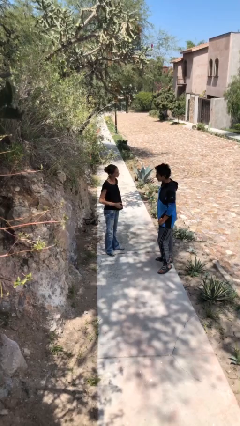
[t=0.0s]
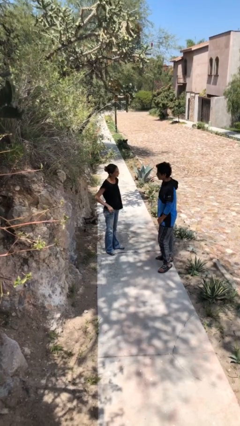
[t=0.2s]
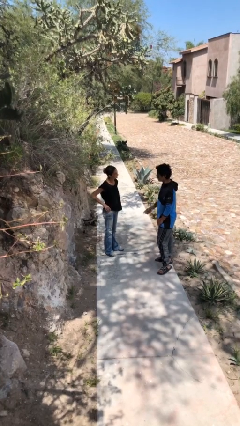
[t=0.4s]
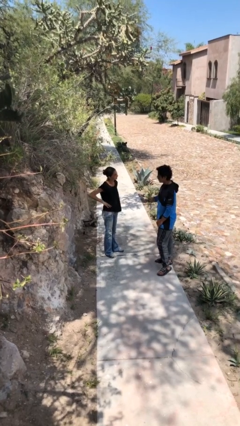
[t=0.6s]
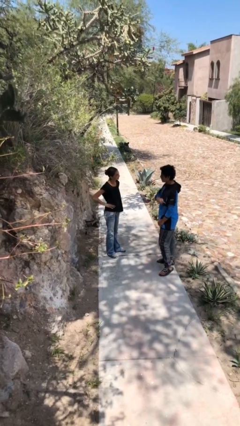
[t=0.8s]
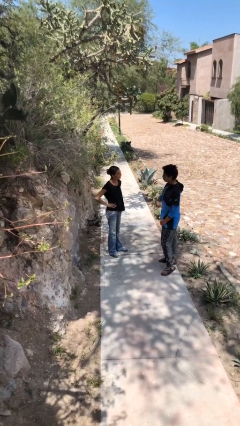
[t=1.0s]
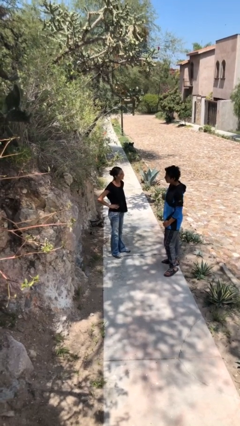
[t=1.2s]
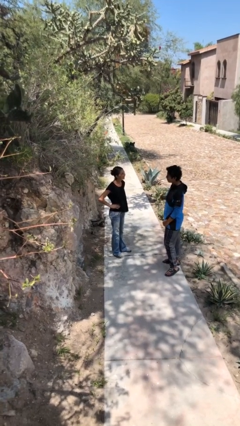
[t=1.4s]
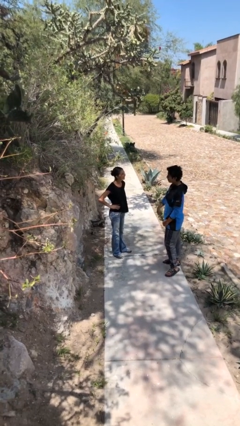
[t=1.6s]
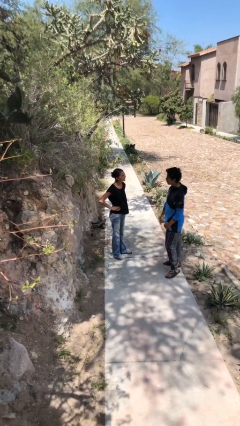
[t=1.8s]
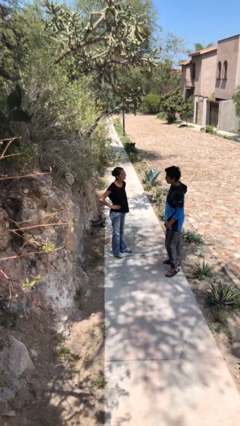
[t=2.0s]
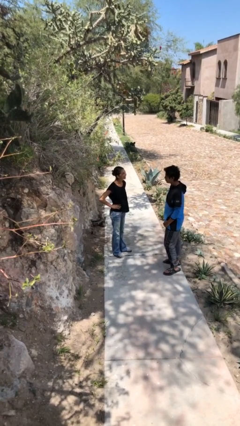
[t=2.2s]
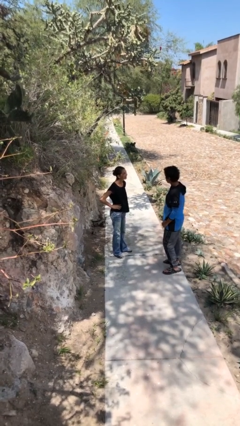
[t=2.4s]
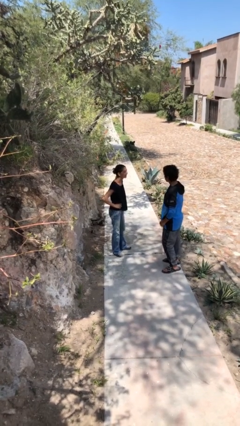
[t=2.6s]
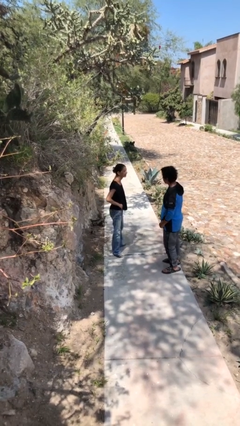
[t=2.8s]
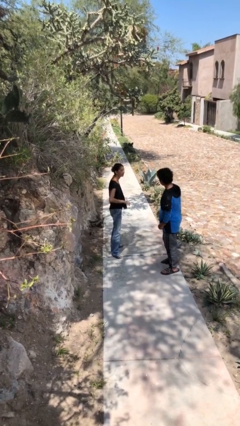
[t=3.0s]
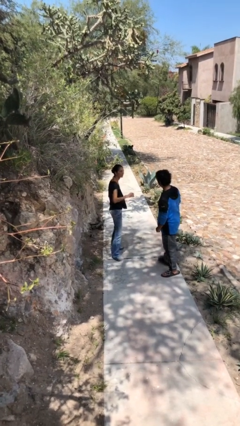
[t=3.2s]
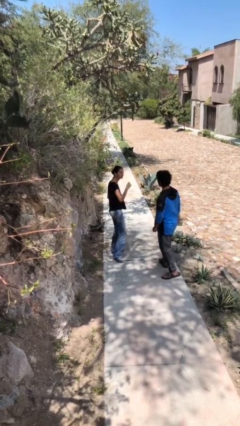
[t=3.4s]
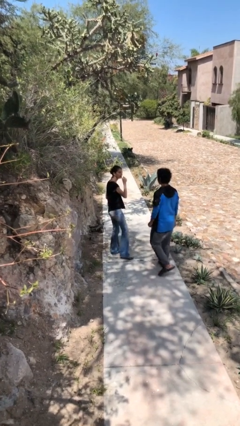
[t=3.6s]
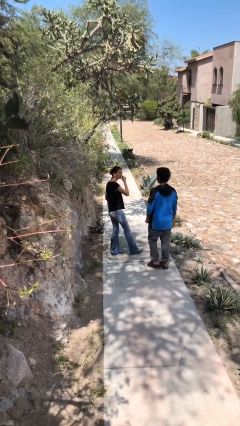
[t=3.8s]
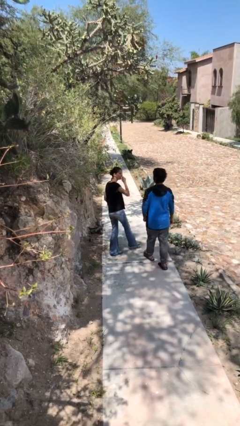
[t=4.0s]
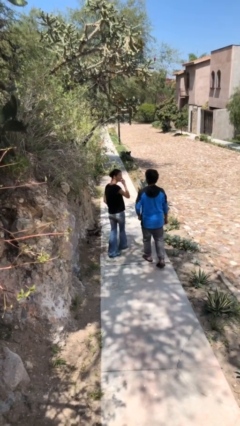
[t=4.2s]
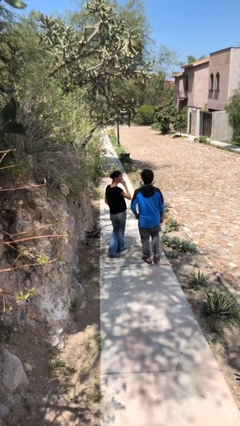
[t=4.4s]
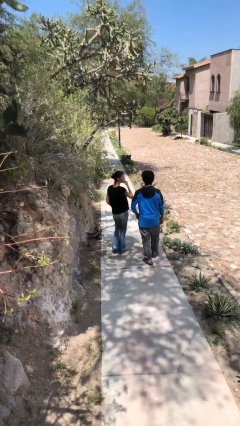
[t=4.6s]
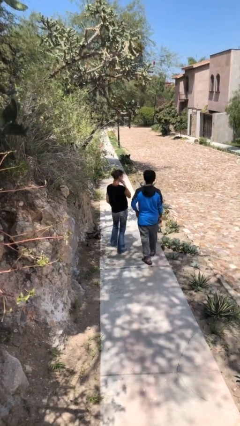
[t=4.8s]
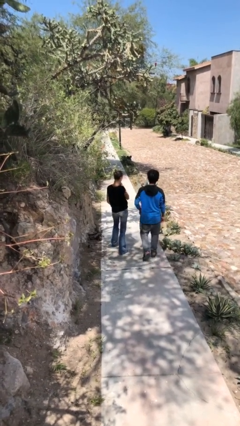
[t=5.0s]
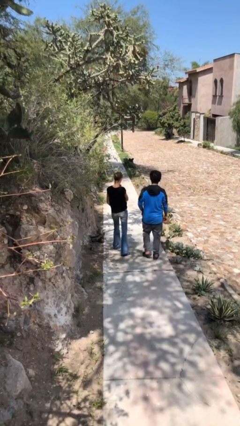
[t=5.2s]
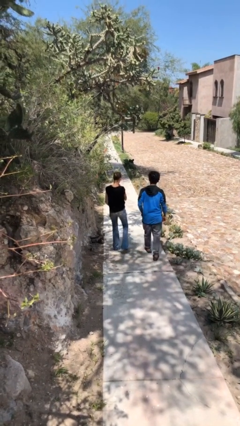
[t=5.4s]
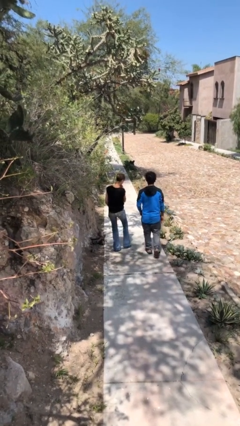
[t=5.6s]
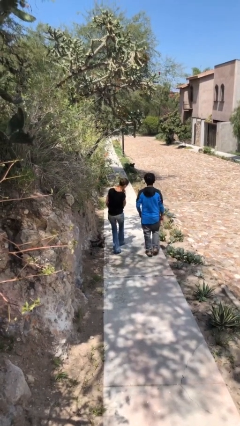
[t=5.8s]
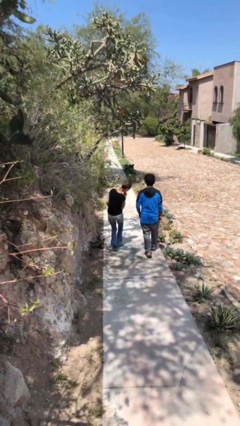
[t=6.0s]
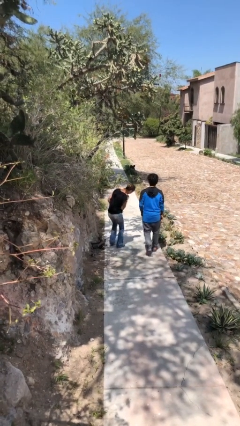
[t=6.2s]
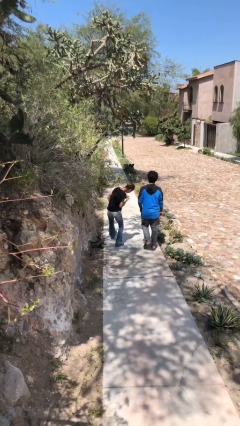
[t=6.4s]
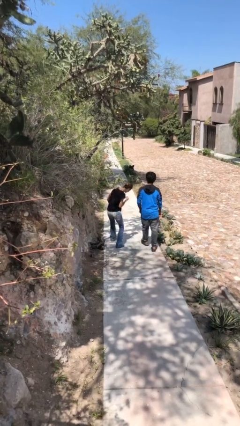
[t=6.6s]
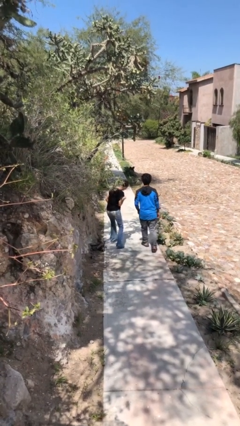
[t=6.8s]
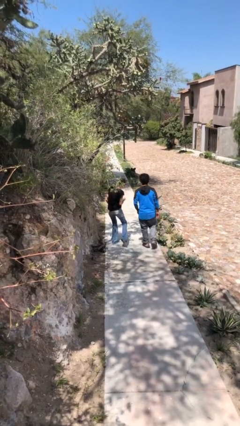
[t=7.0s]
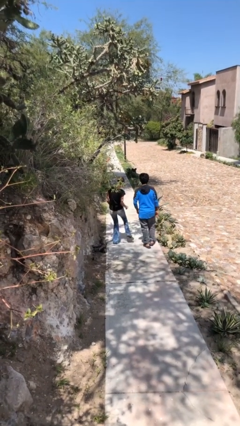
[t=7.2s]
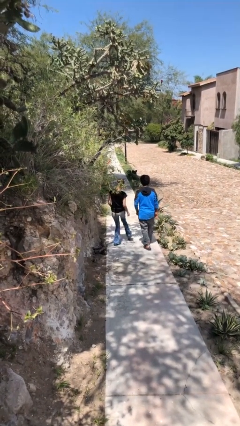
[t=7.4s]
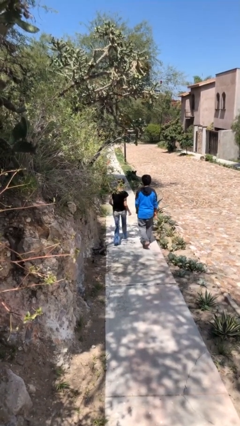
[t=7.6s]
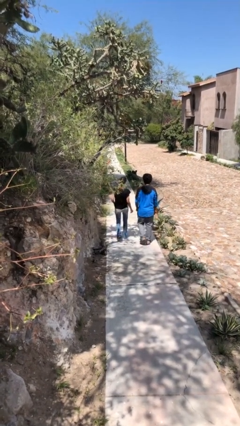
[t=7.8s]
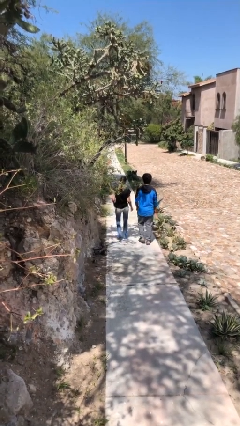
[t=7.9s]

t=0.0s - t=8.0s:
person talks to person

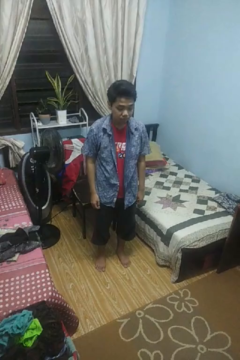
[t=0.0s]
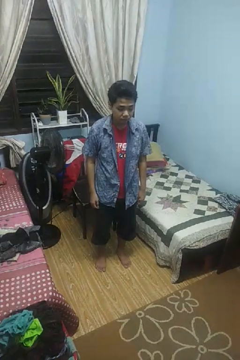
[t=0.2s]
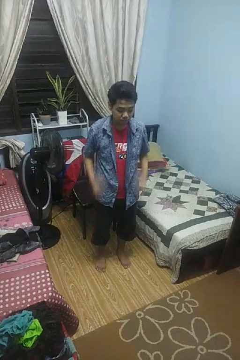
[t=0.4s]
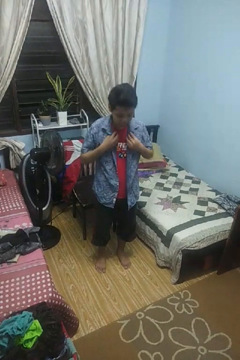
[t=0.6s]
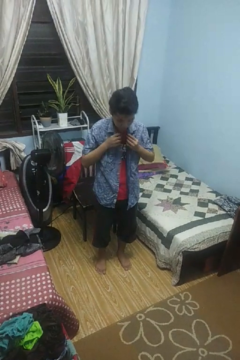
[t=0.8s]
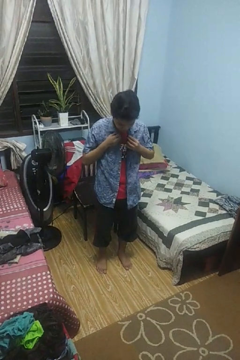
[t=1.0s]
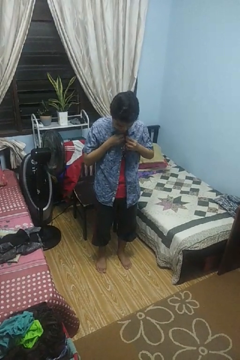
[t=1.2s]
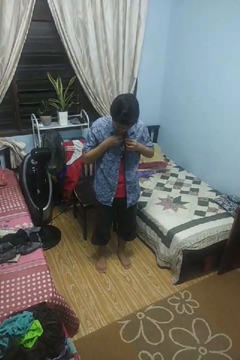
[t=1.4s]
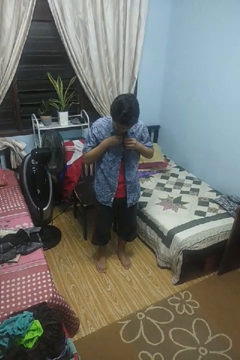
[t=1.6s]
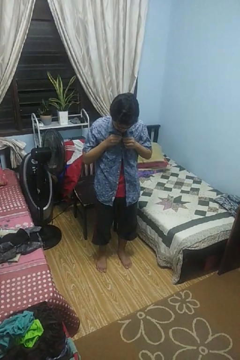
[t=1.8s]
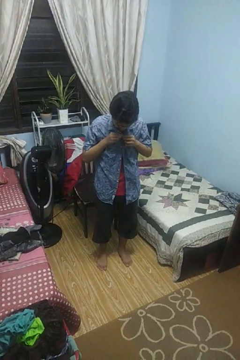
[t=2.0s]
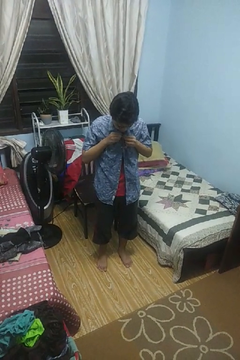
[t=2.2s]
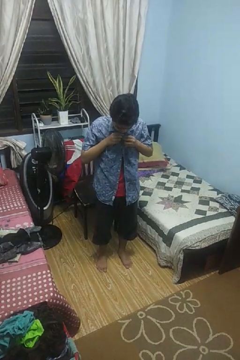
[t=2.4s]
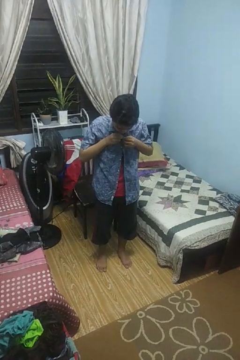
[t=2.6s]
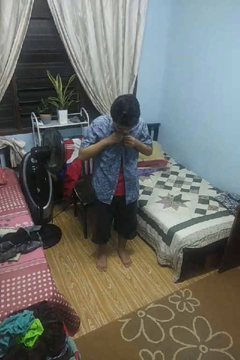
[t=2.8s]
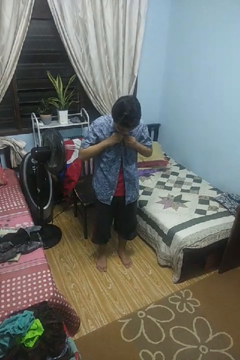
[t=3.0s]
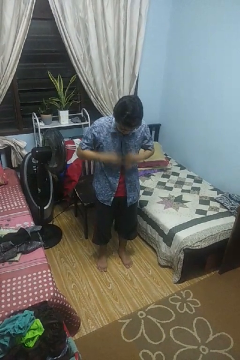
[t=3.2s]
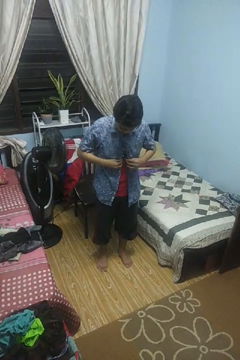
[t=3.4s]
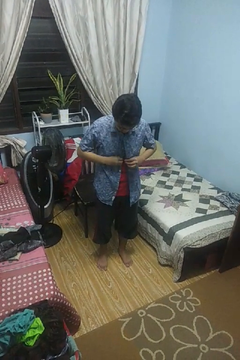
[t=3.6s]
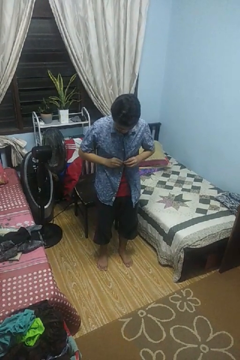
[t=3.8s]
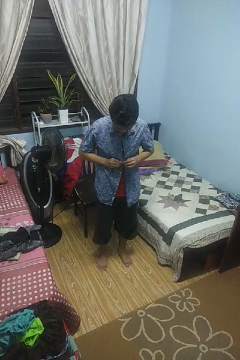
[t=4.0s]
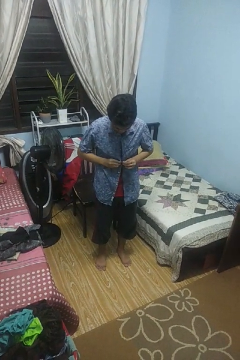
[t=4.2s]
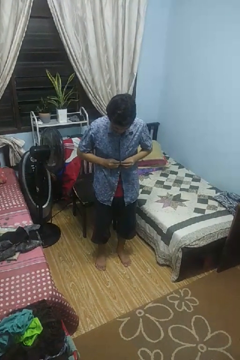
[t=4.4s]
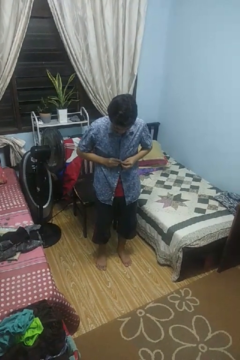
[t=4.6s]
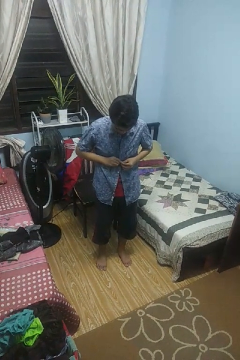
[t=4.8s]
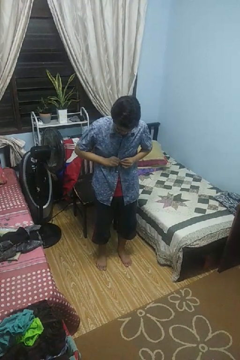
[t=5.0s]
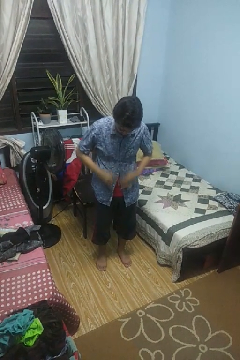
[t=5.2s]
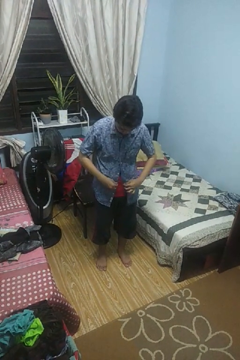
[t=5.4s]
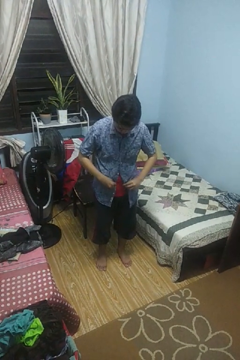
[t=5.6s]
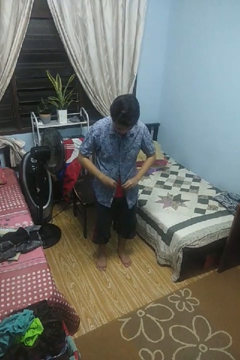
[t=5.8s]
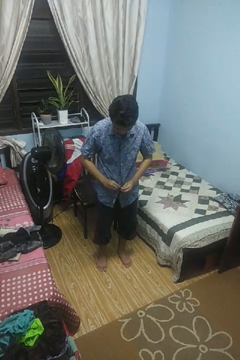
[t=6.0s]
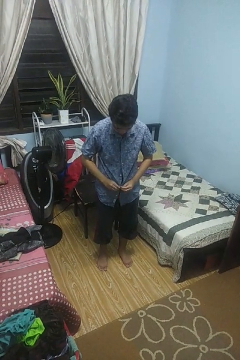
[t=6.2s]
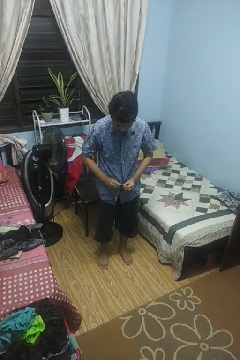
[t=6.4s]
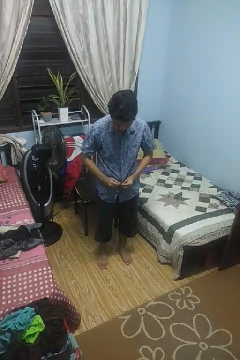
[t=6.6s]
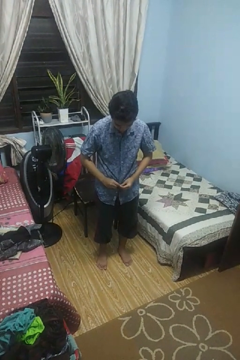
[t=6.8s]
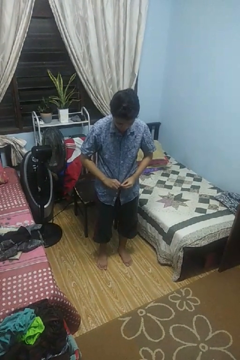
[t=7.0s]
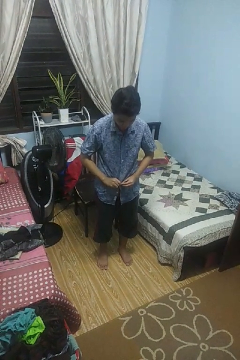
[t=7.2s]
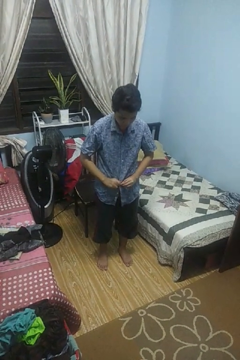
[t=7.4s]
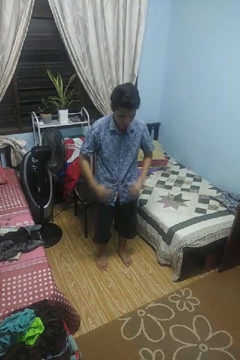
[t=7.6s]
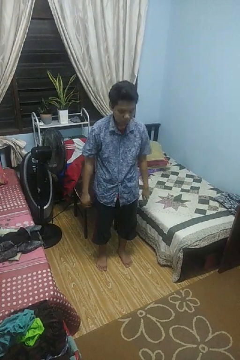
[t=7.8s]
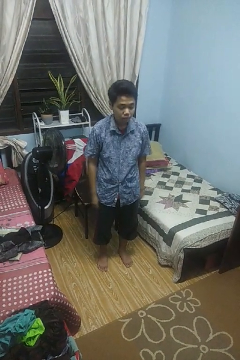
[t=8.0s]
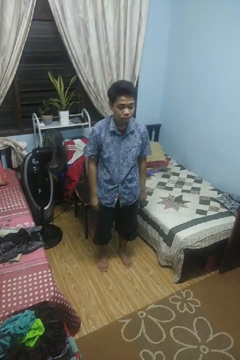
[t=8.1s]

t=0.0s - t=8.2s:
person buttons shirt

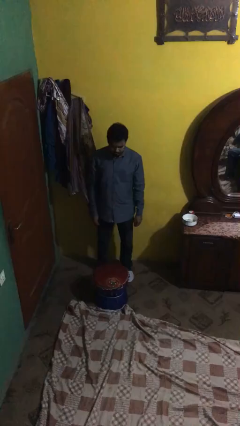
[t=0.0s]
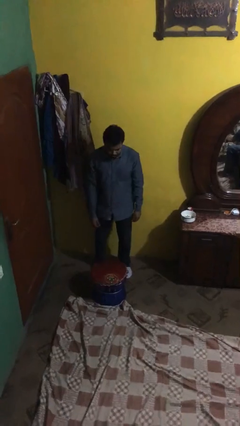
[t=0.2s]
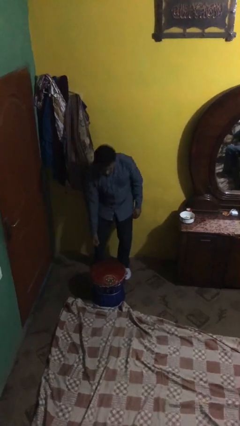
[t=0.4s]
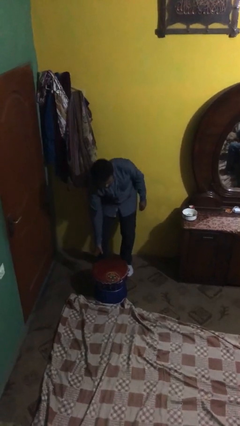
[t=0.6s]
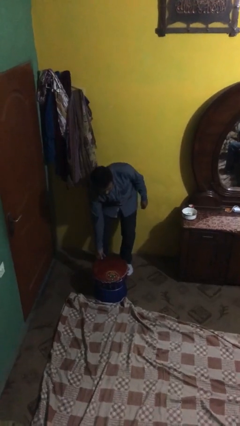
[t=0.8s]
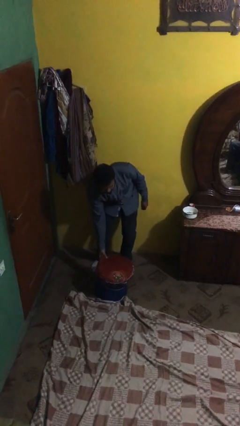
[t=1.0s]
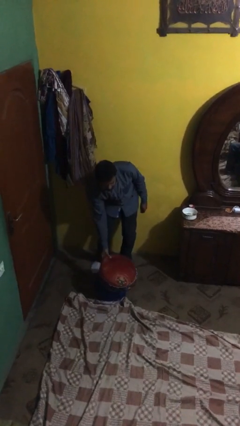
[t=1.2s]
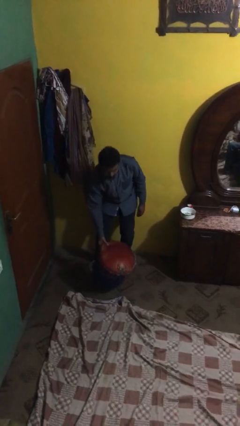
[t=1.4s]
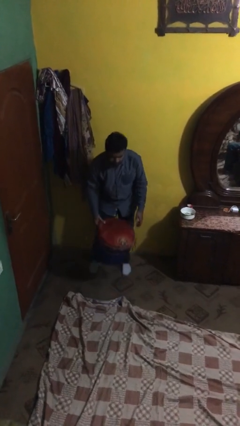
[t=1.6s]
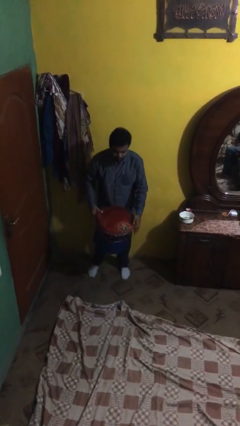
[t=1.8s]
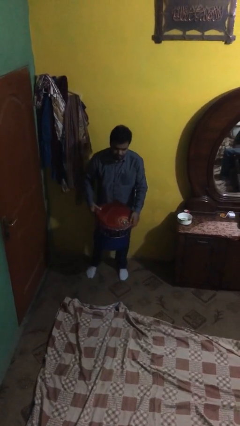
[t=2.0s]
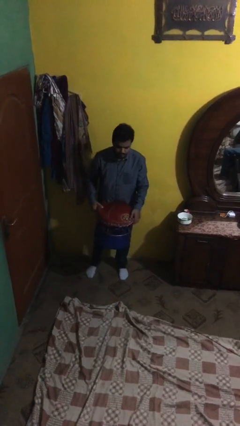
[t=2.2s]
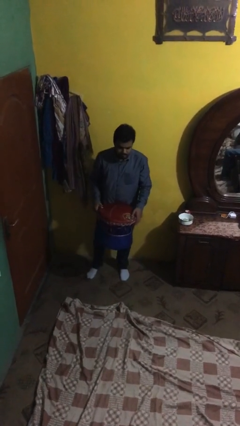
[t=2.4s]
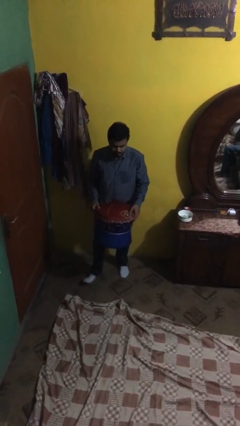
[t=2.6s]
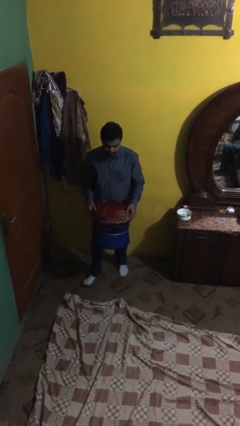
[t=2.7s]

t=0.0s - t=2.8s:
person picks up object from floor

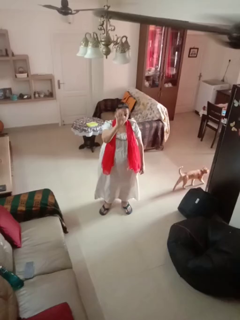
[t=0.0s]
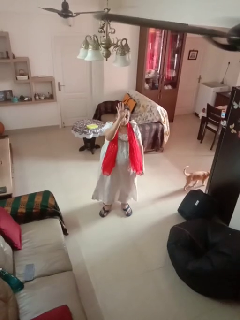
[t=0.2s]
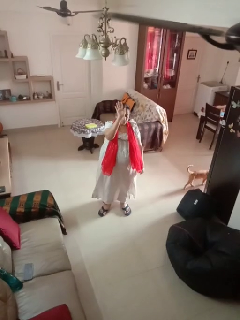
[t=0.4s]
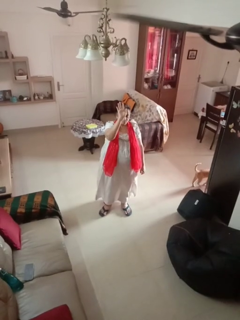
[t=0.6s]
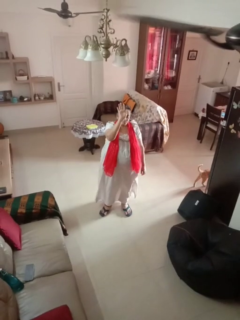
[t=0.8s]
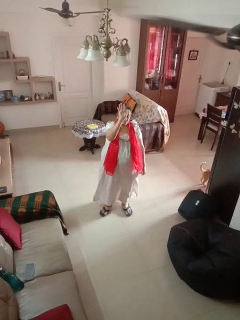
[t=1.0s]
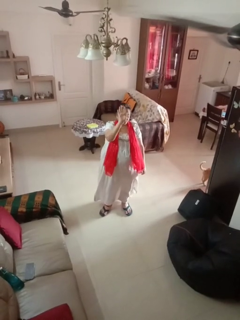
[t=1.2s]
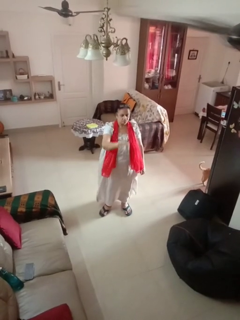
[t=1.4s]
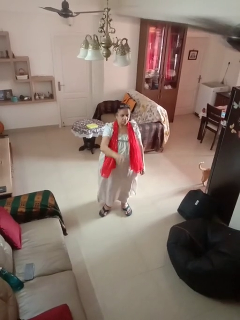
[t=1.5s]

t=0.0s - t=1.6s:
person gestures raise hand
